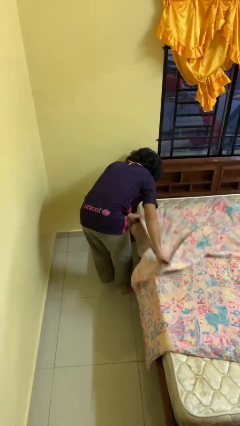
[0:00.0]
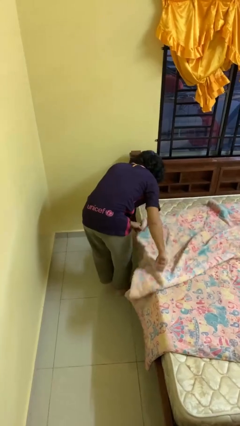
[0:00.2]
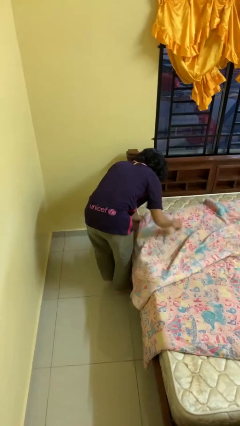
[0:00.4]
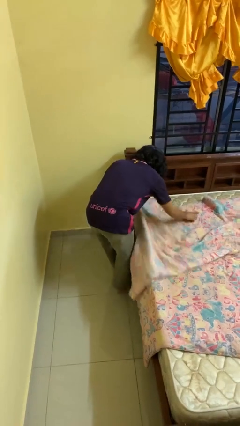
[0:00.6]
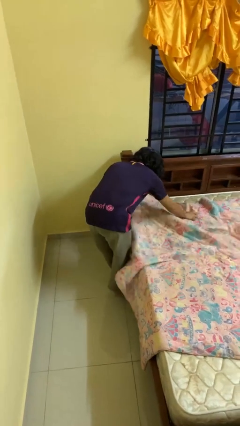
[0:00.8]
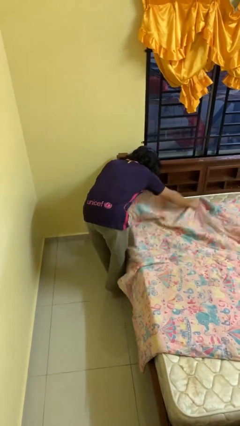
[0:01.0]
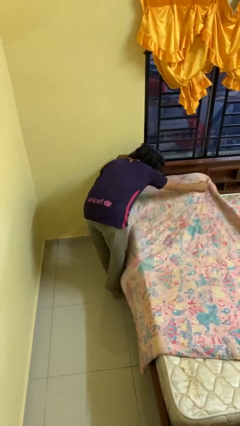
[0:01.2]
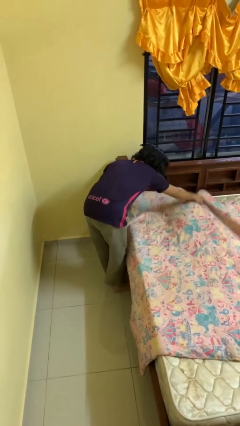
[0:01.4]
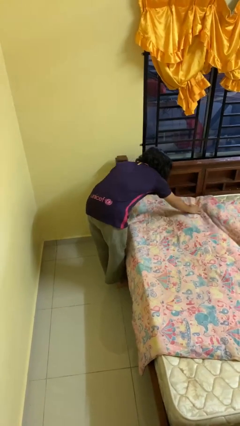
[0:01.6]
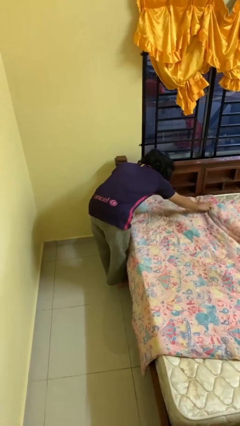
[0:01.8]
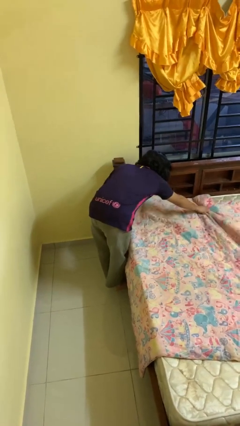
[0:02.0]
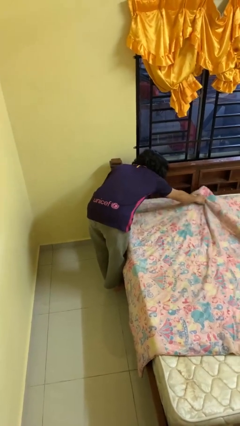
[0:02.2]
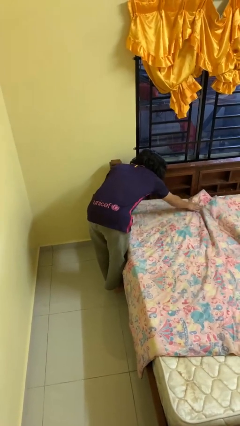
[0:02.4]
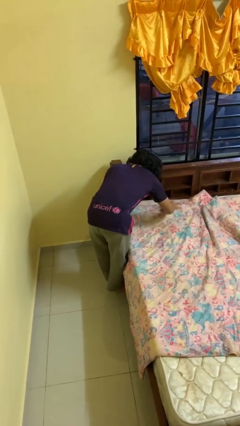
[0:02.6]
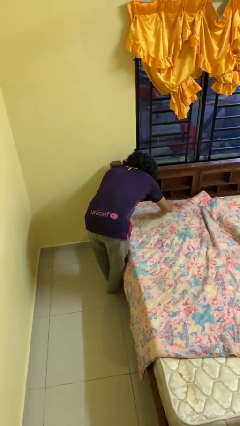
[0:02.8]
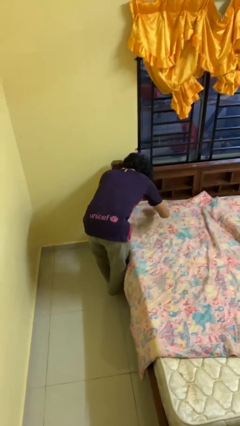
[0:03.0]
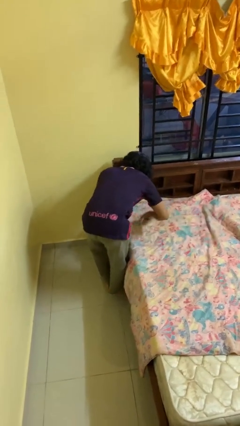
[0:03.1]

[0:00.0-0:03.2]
person makes bed

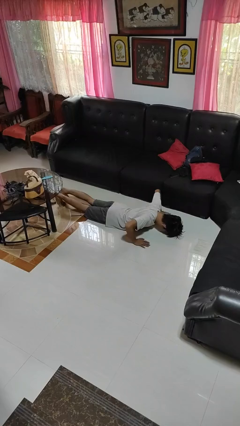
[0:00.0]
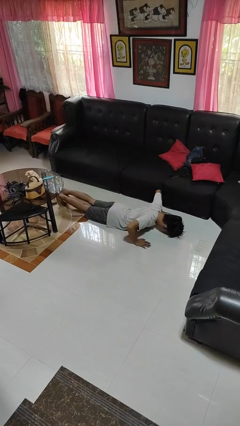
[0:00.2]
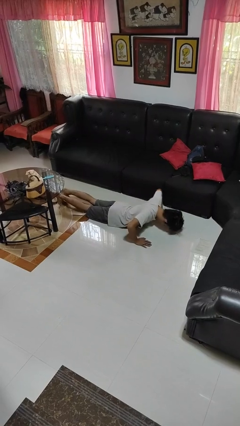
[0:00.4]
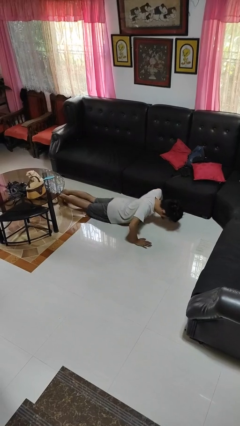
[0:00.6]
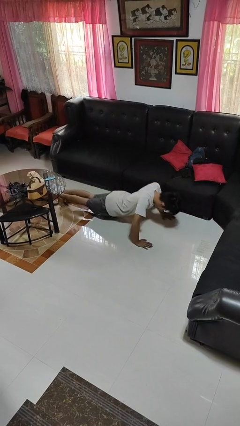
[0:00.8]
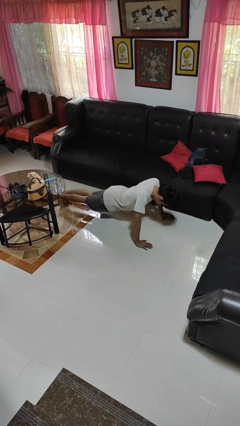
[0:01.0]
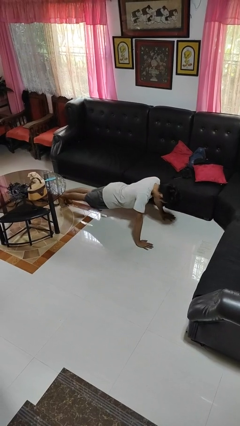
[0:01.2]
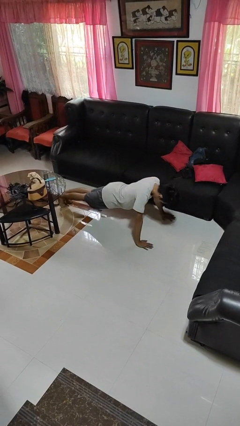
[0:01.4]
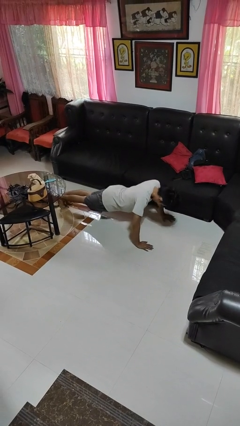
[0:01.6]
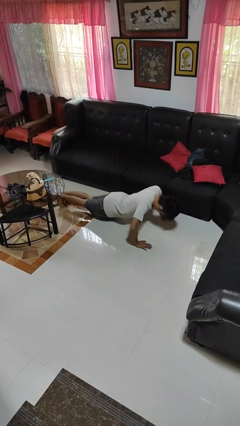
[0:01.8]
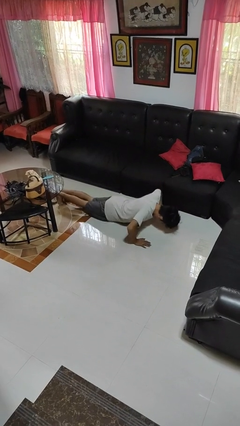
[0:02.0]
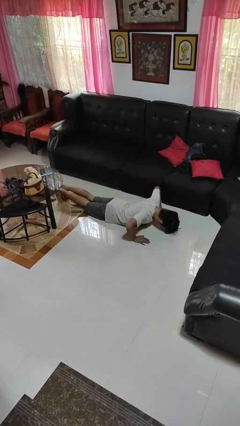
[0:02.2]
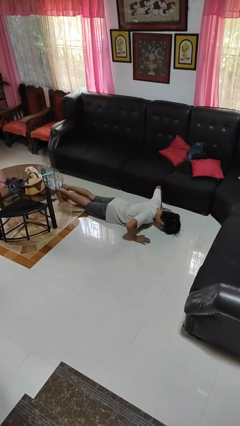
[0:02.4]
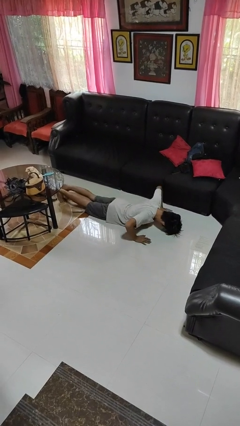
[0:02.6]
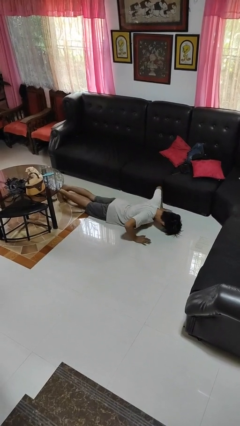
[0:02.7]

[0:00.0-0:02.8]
person exercises with pushup

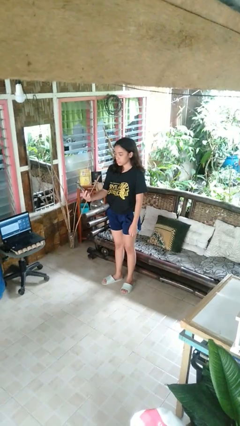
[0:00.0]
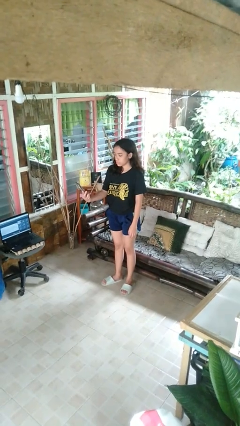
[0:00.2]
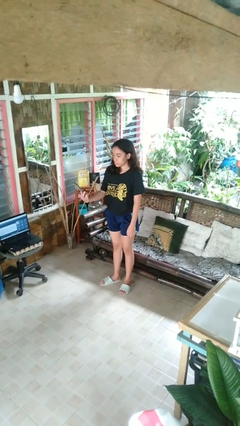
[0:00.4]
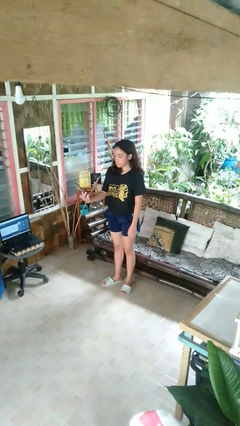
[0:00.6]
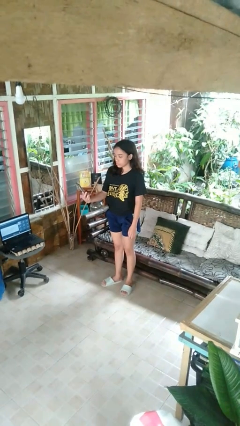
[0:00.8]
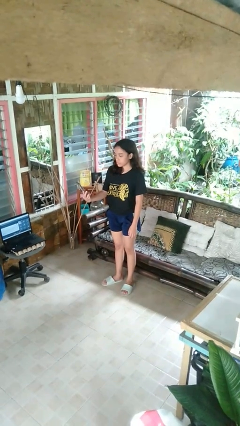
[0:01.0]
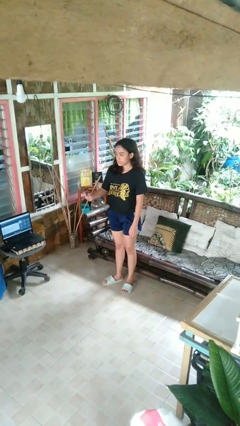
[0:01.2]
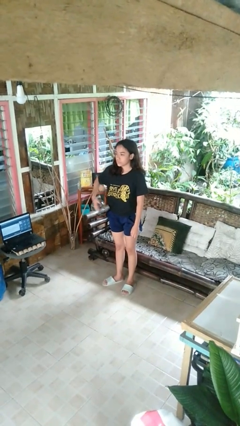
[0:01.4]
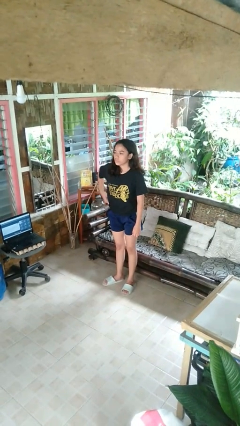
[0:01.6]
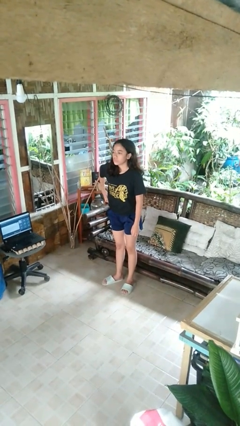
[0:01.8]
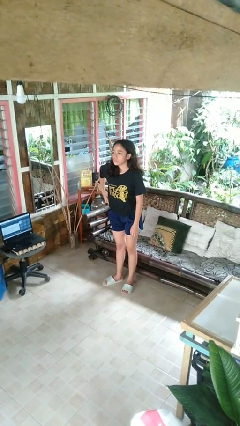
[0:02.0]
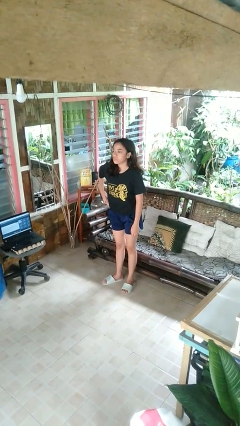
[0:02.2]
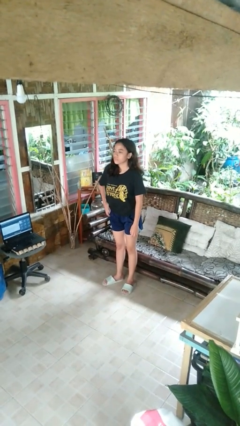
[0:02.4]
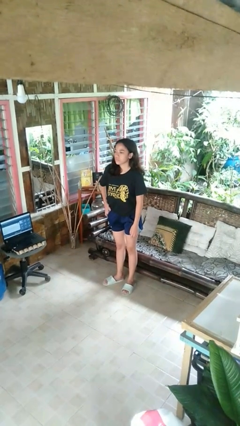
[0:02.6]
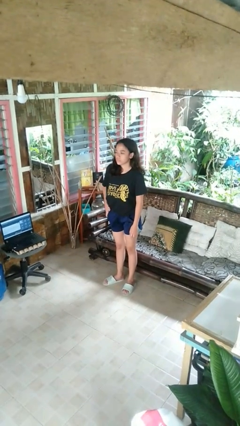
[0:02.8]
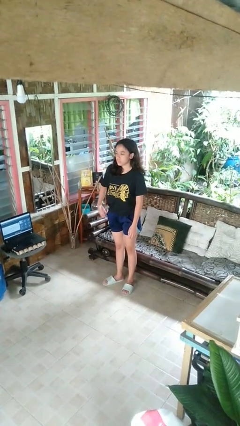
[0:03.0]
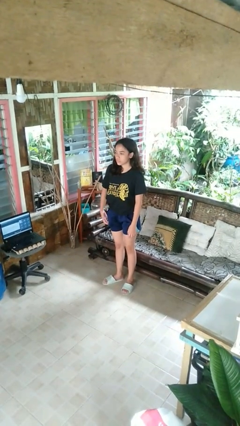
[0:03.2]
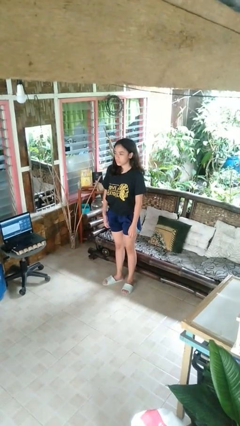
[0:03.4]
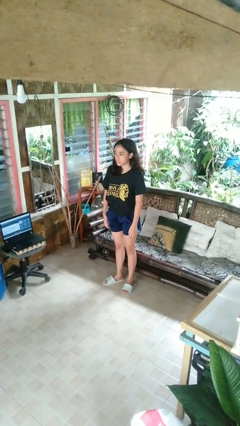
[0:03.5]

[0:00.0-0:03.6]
person puts phone into pocket

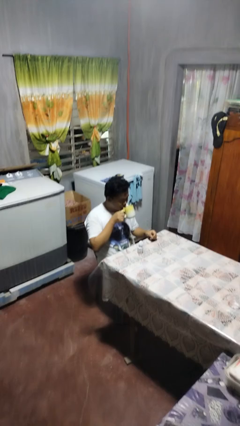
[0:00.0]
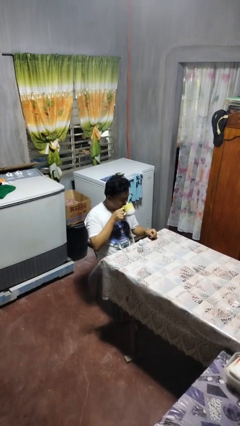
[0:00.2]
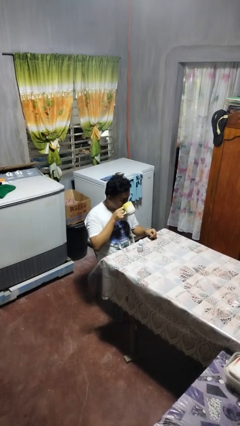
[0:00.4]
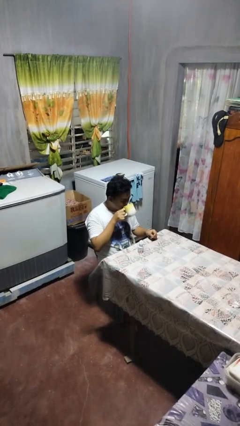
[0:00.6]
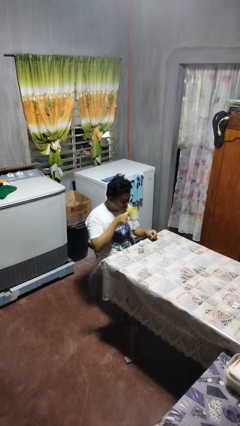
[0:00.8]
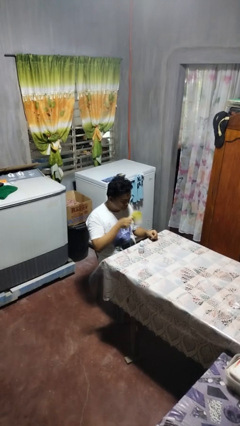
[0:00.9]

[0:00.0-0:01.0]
person drinks from cup

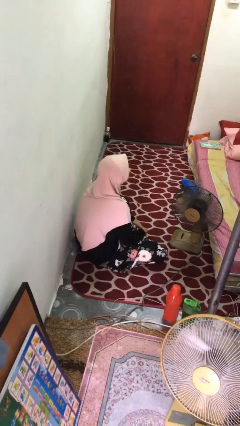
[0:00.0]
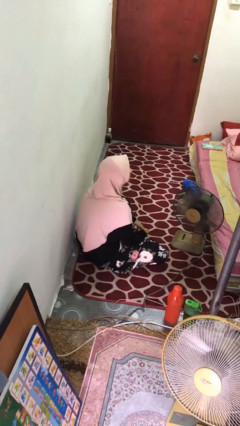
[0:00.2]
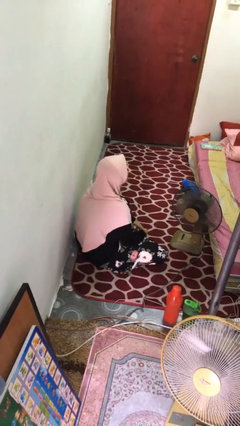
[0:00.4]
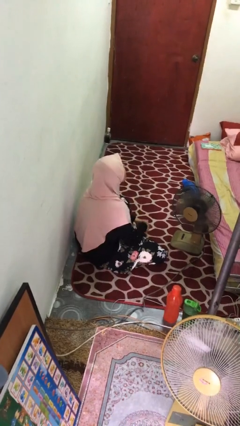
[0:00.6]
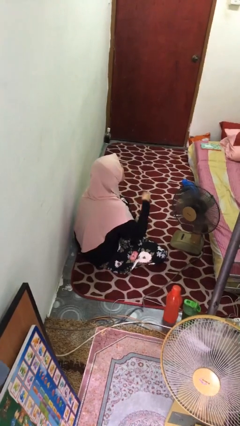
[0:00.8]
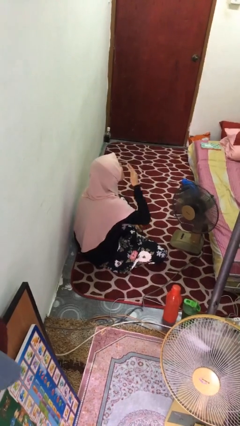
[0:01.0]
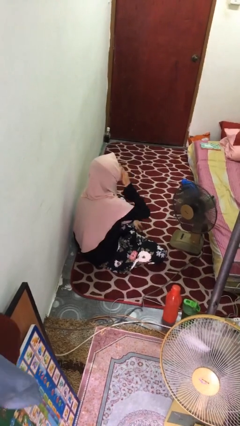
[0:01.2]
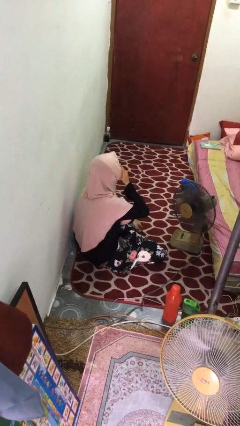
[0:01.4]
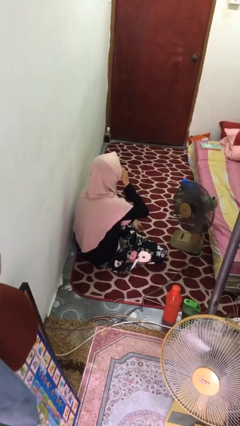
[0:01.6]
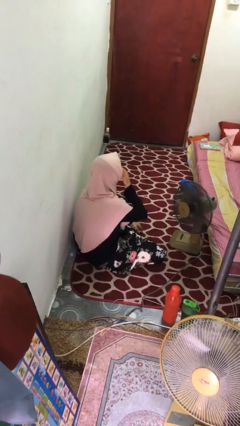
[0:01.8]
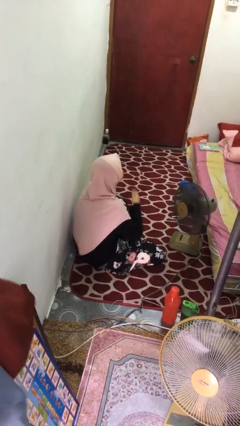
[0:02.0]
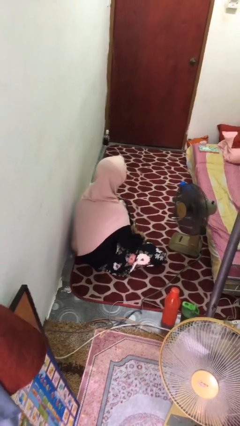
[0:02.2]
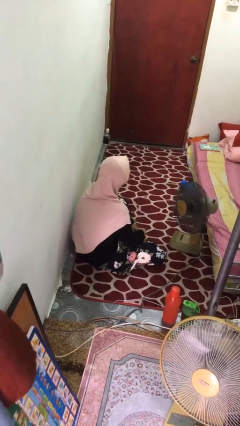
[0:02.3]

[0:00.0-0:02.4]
person yawns

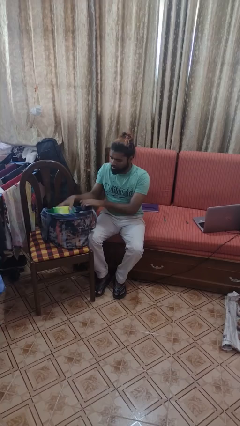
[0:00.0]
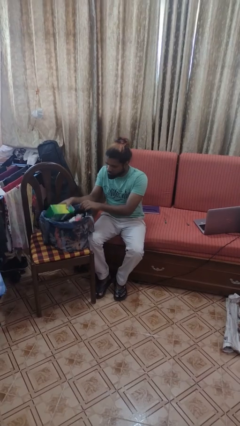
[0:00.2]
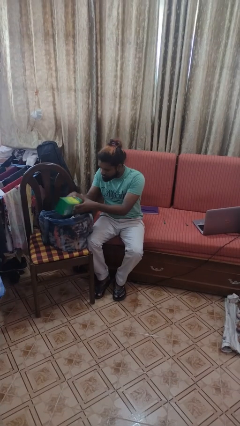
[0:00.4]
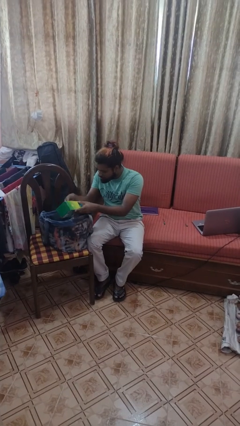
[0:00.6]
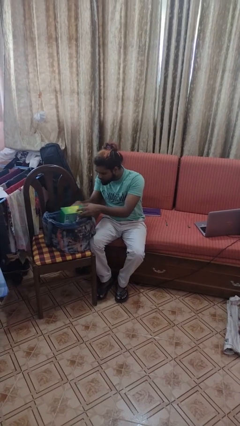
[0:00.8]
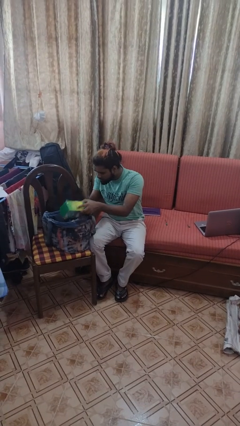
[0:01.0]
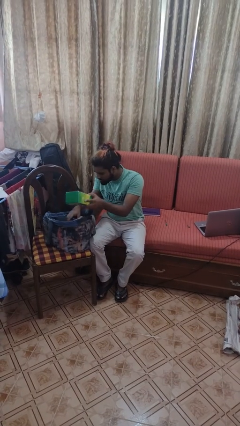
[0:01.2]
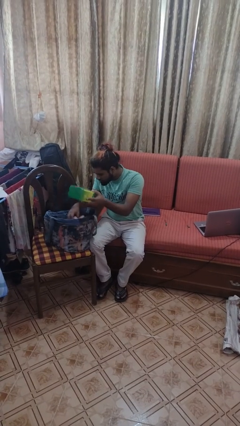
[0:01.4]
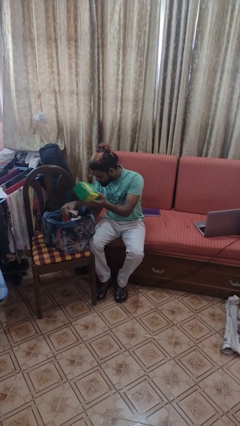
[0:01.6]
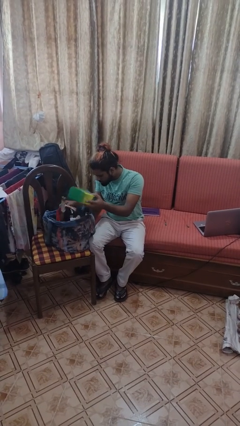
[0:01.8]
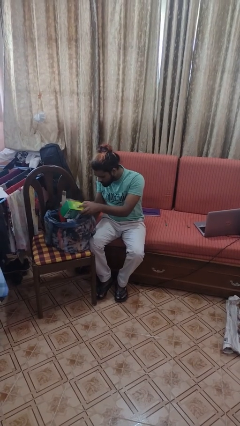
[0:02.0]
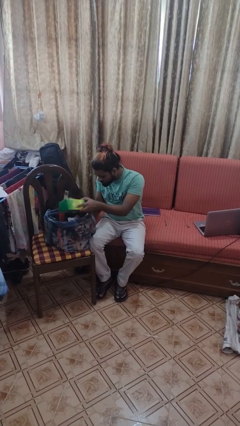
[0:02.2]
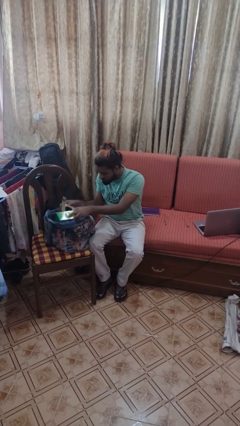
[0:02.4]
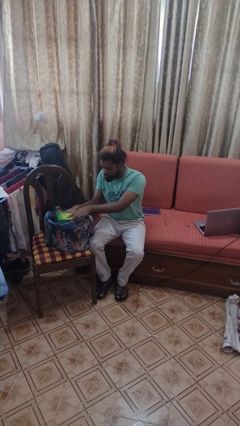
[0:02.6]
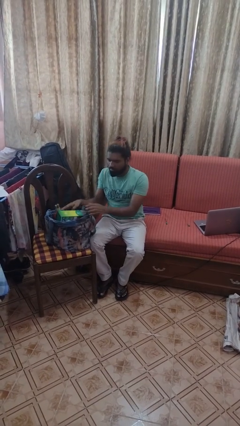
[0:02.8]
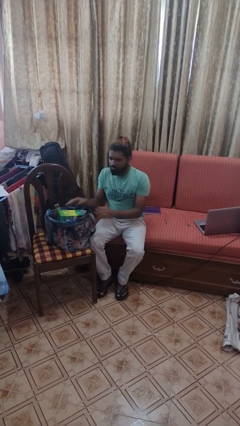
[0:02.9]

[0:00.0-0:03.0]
person searches in bag

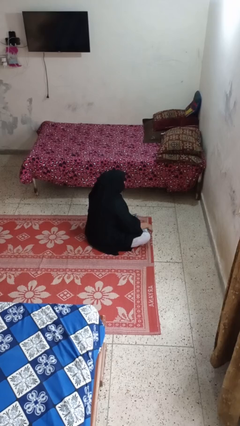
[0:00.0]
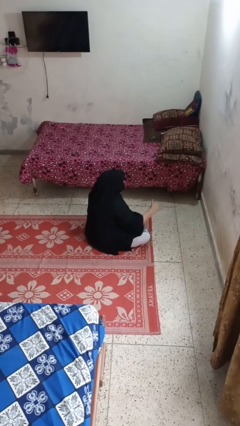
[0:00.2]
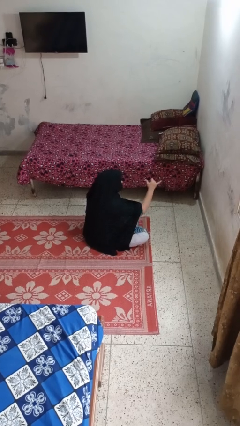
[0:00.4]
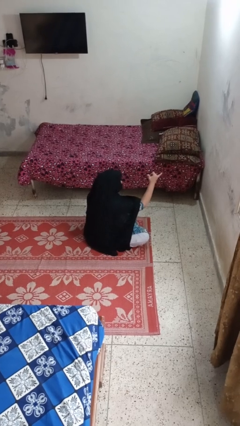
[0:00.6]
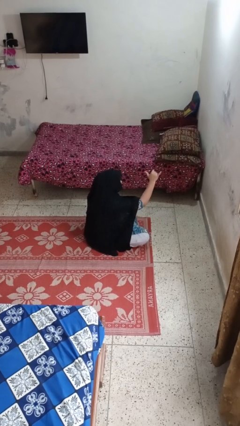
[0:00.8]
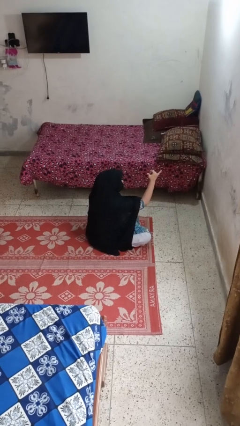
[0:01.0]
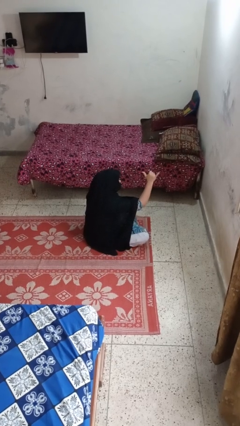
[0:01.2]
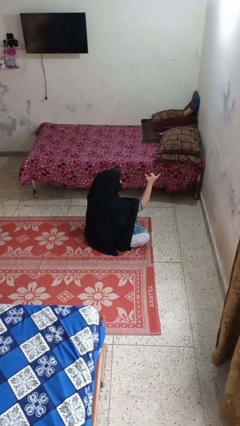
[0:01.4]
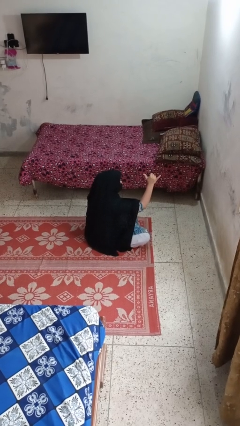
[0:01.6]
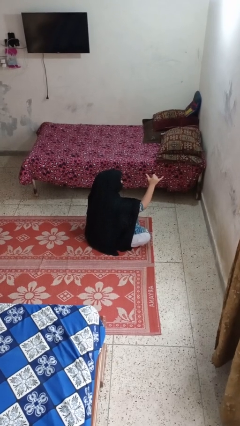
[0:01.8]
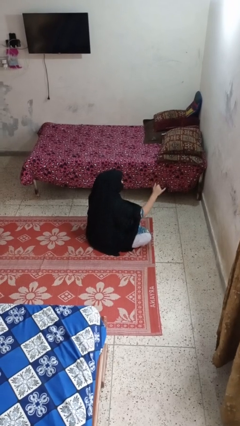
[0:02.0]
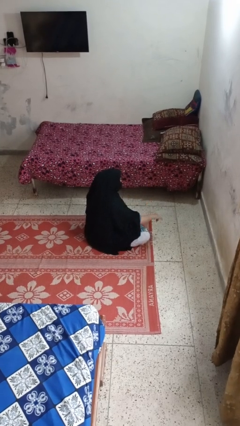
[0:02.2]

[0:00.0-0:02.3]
person gestures hang loose
